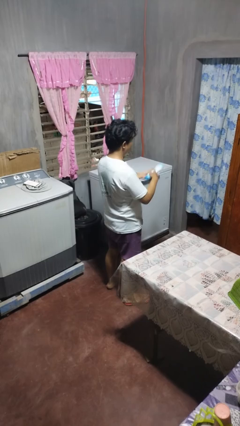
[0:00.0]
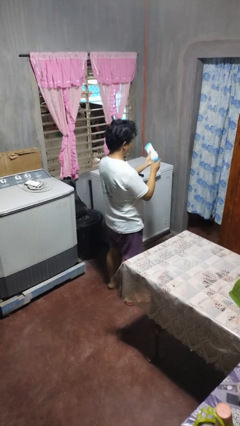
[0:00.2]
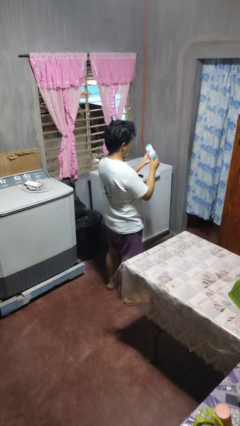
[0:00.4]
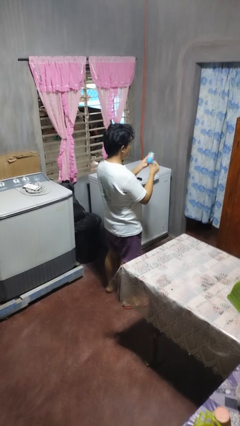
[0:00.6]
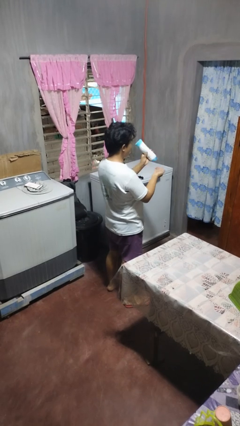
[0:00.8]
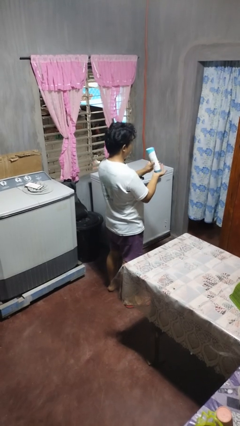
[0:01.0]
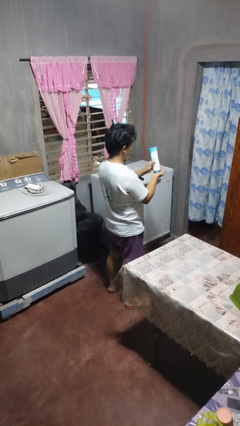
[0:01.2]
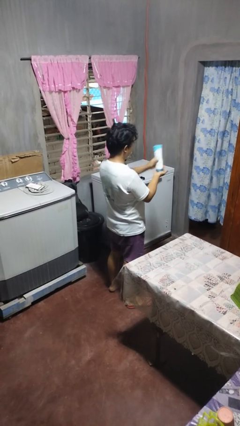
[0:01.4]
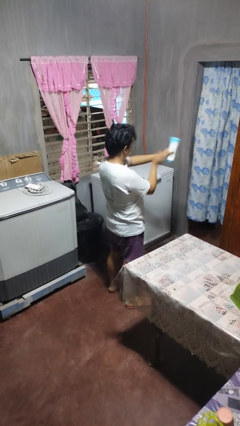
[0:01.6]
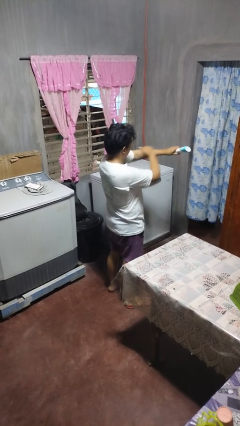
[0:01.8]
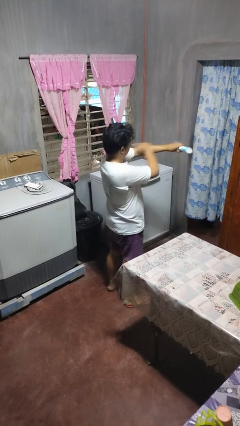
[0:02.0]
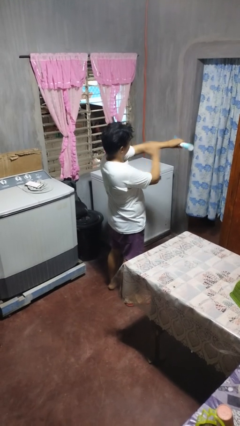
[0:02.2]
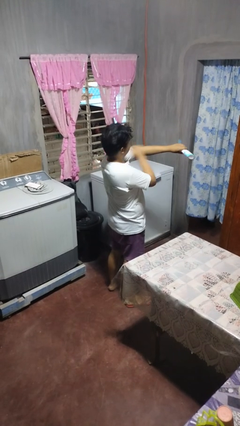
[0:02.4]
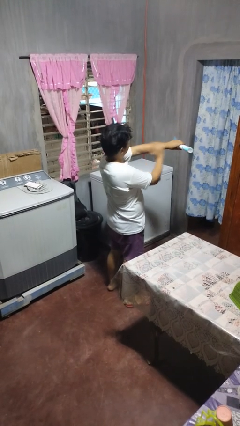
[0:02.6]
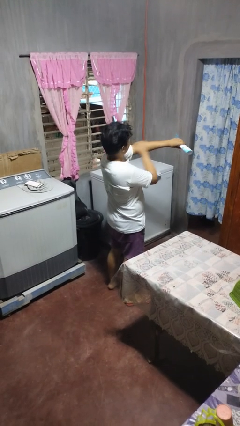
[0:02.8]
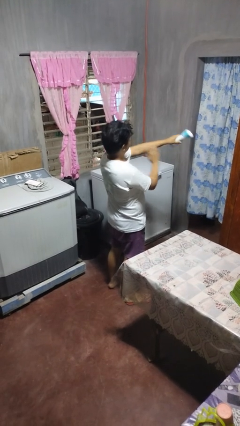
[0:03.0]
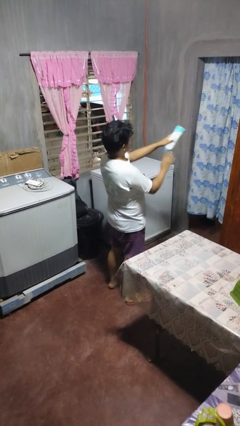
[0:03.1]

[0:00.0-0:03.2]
person applies sunscreen

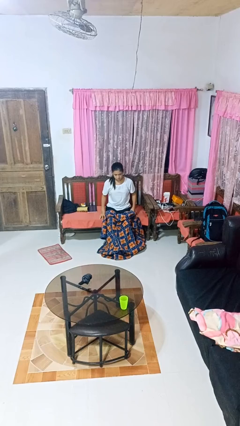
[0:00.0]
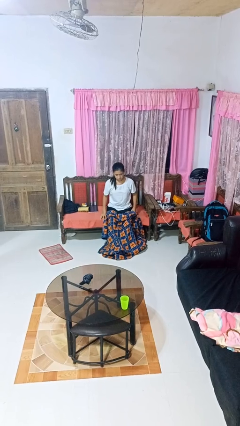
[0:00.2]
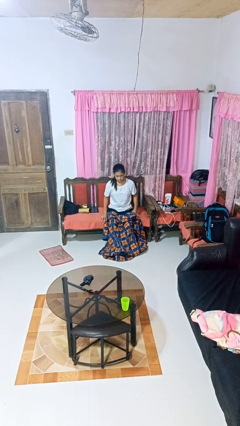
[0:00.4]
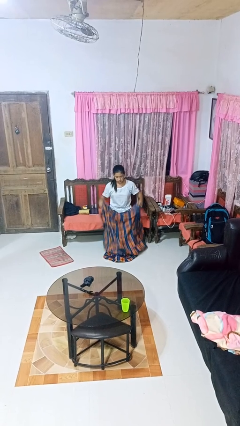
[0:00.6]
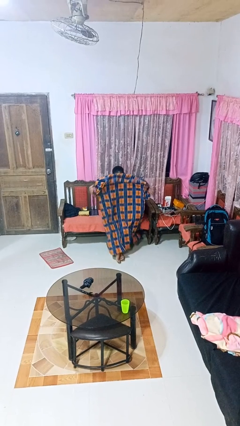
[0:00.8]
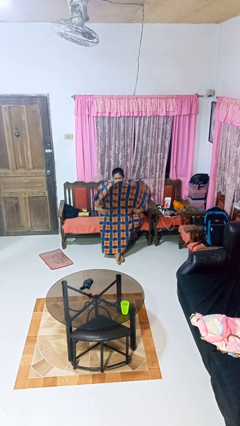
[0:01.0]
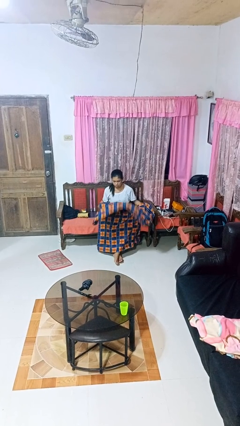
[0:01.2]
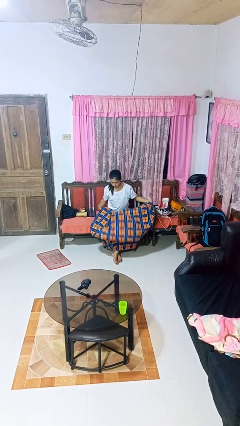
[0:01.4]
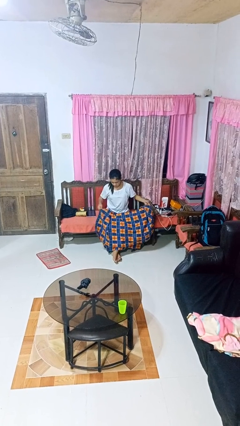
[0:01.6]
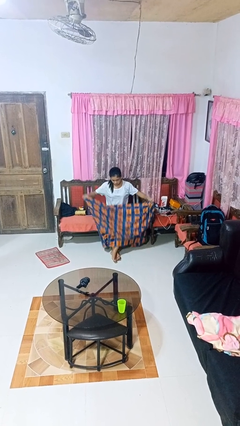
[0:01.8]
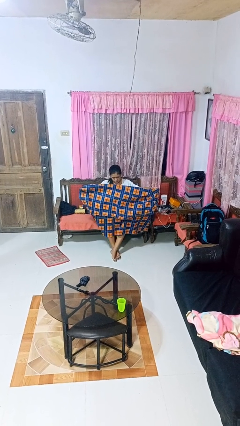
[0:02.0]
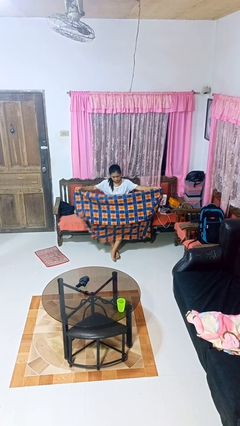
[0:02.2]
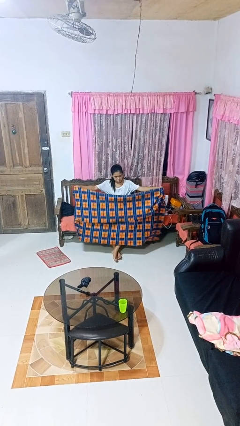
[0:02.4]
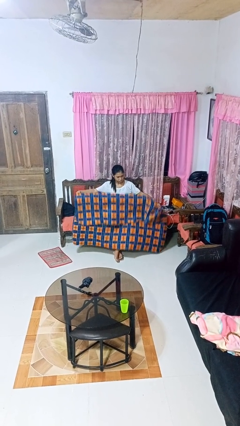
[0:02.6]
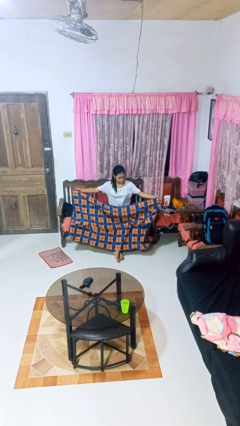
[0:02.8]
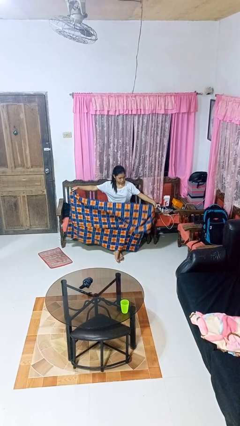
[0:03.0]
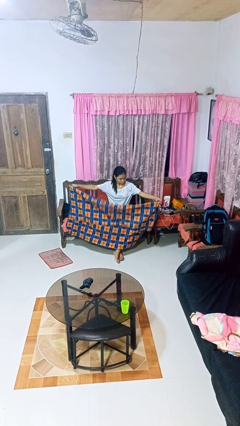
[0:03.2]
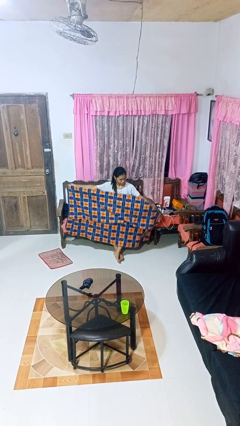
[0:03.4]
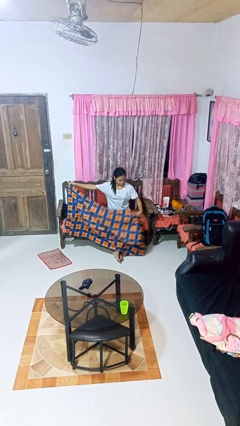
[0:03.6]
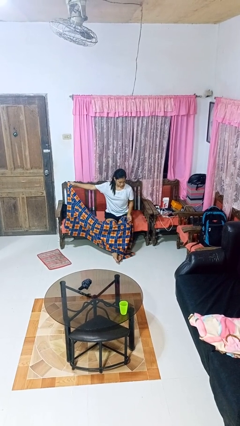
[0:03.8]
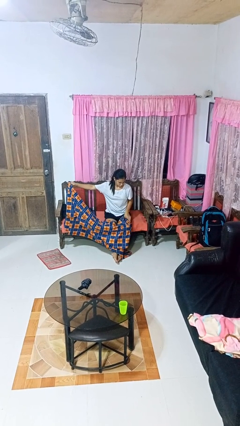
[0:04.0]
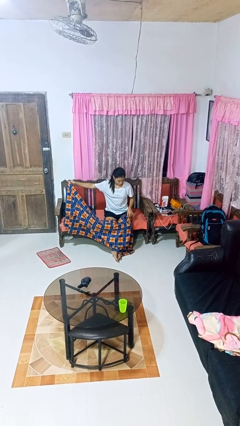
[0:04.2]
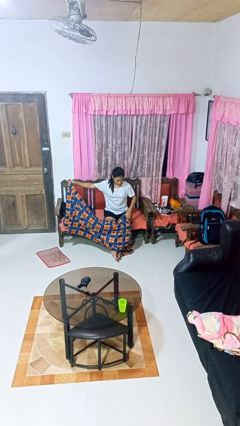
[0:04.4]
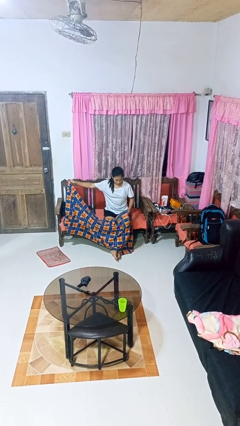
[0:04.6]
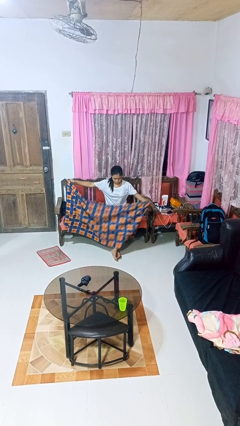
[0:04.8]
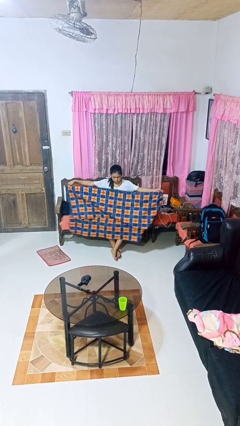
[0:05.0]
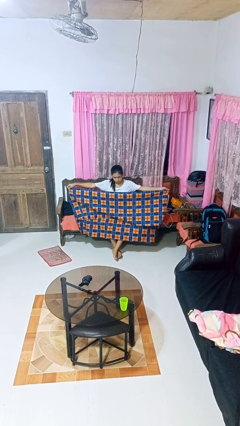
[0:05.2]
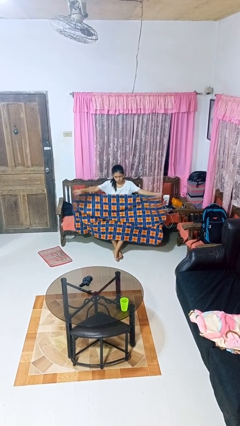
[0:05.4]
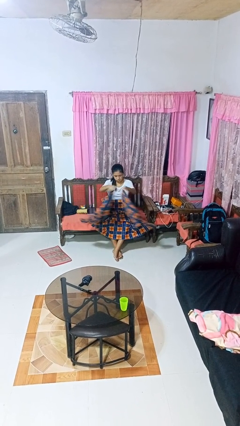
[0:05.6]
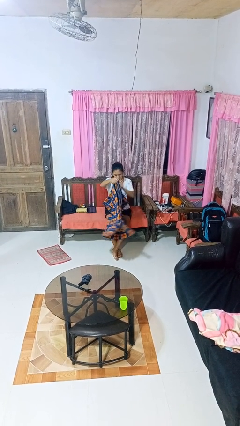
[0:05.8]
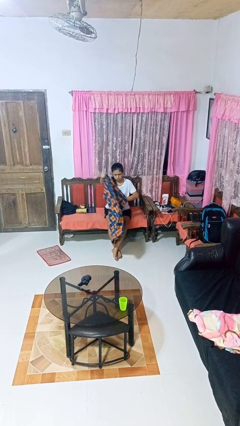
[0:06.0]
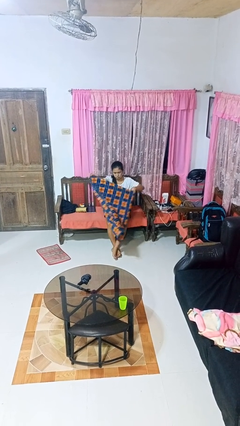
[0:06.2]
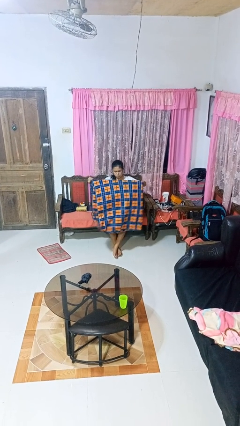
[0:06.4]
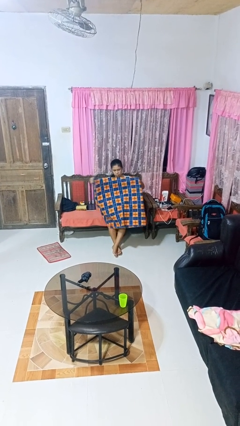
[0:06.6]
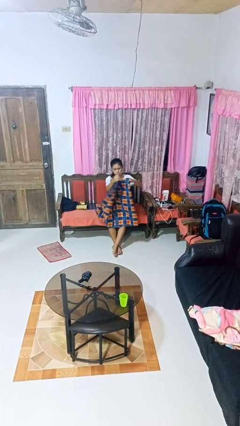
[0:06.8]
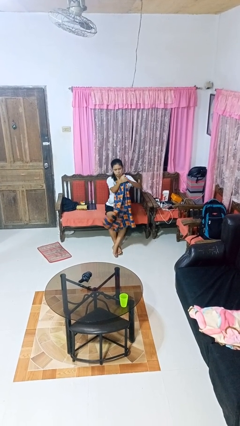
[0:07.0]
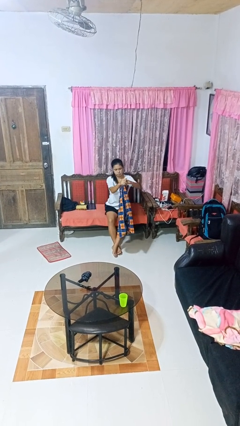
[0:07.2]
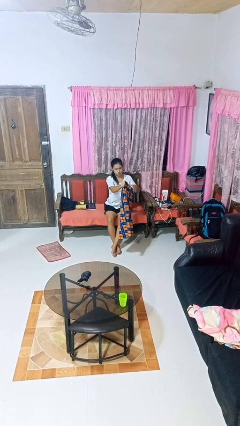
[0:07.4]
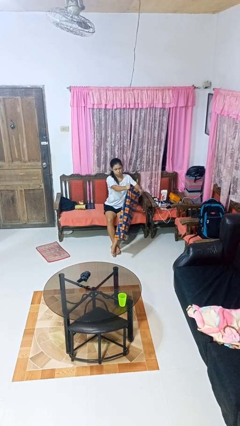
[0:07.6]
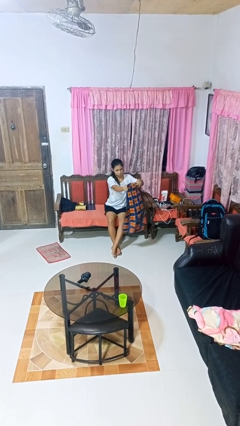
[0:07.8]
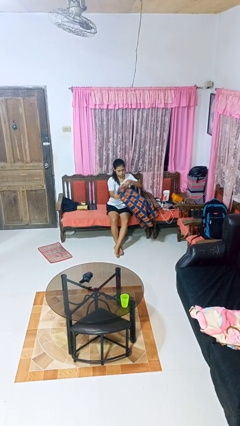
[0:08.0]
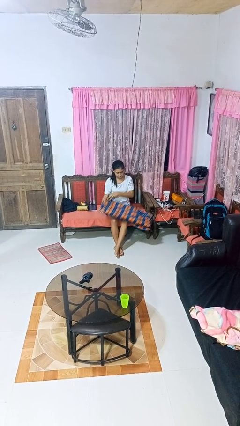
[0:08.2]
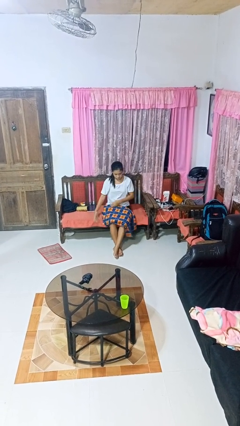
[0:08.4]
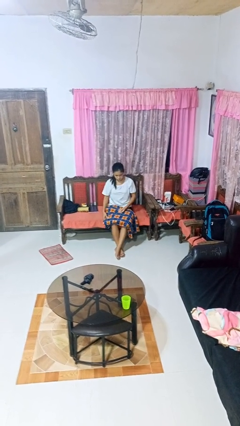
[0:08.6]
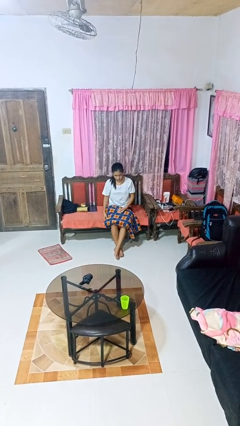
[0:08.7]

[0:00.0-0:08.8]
person folds blanket

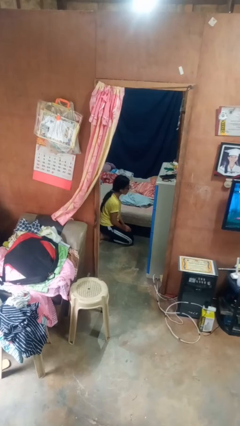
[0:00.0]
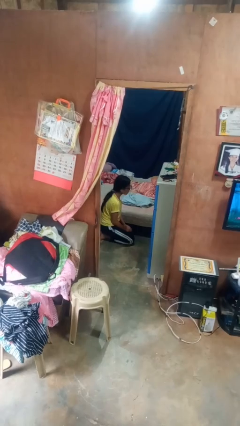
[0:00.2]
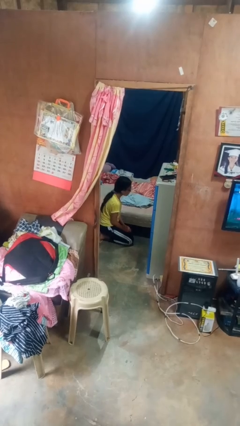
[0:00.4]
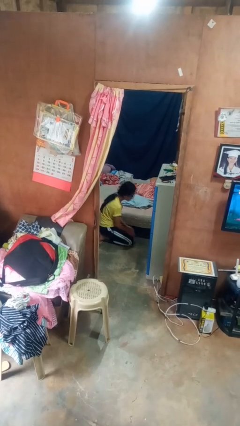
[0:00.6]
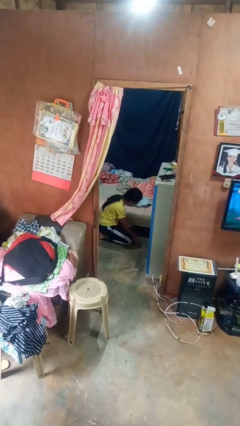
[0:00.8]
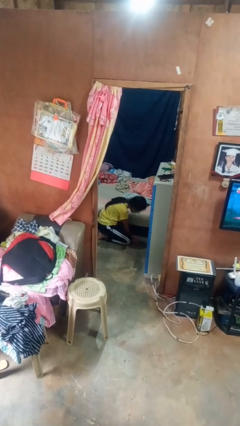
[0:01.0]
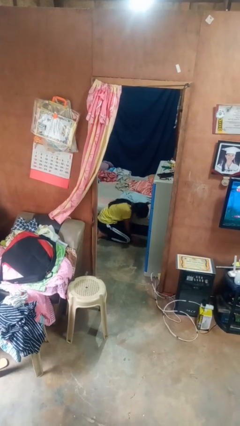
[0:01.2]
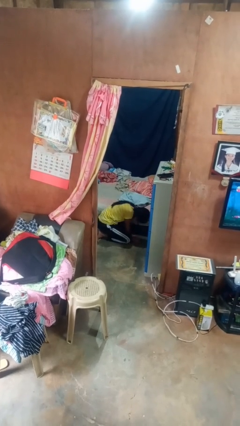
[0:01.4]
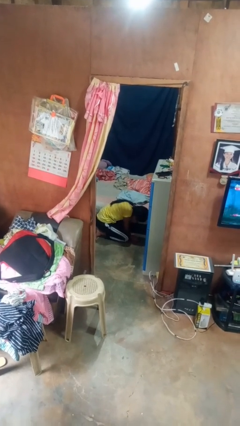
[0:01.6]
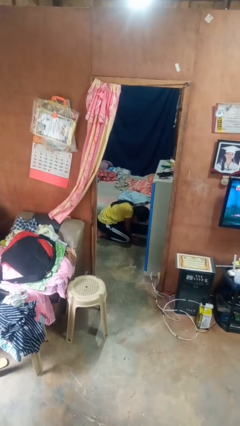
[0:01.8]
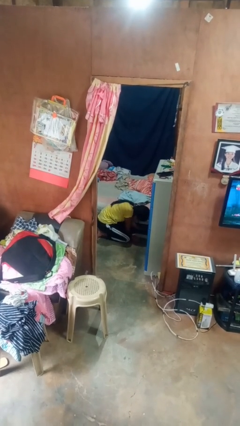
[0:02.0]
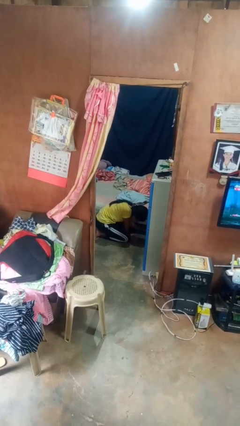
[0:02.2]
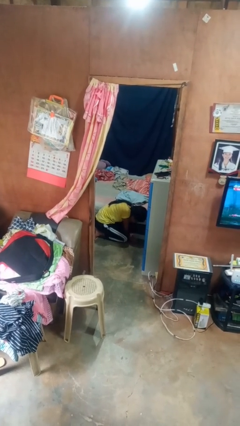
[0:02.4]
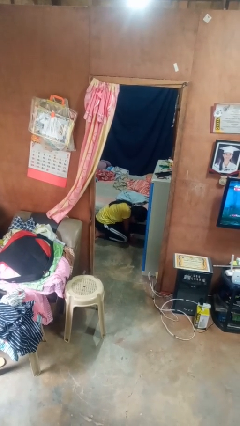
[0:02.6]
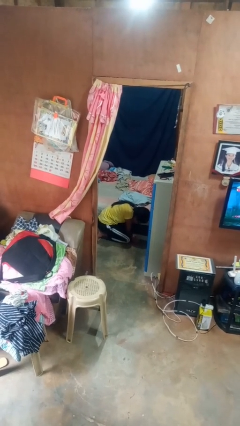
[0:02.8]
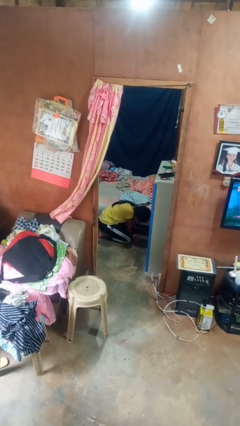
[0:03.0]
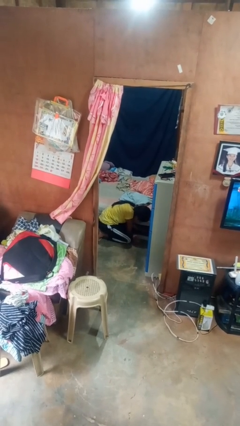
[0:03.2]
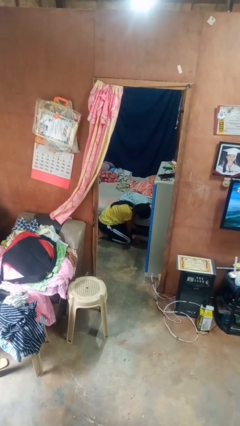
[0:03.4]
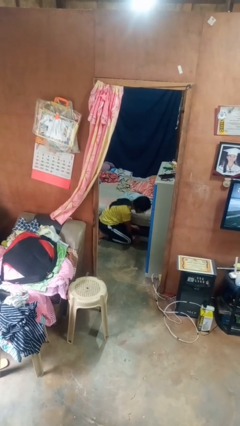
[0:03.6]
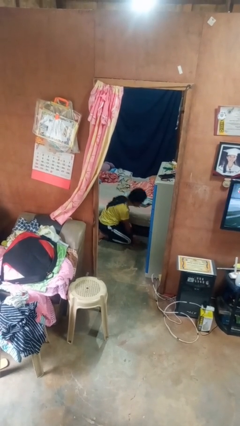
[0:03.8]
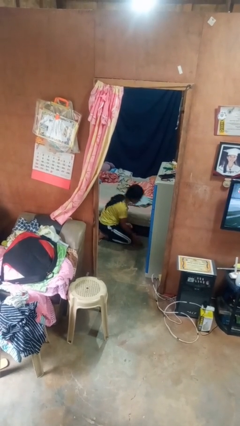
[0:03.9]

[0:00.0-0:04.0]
person searches under bed

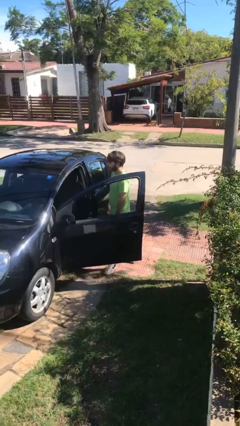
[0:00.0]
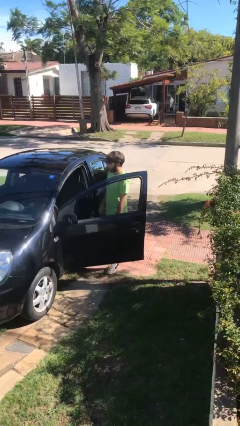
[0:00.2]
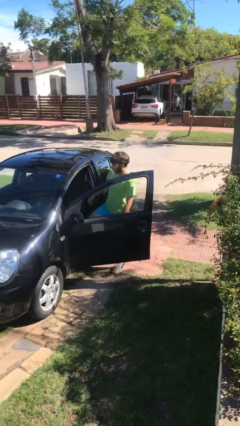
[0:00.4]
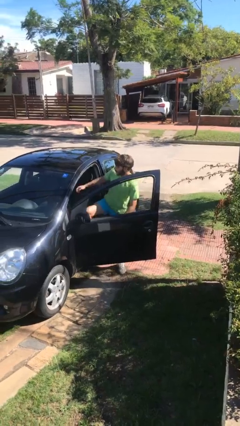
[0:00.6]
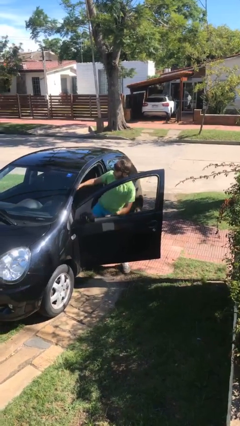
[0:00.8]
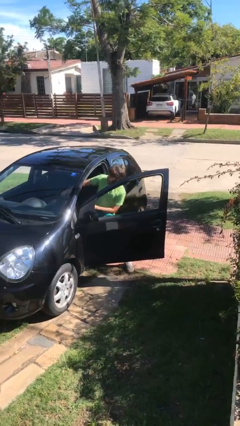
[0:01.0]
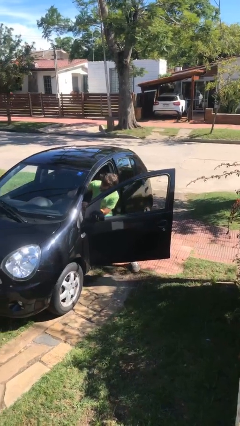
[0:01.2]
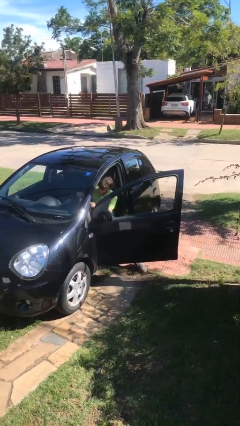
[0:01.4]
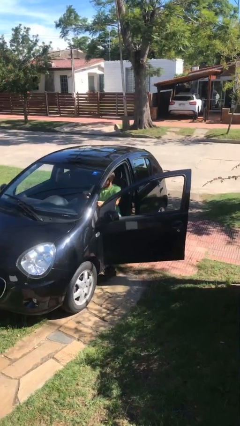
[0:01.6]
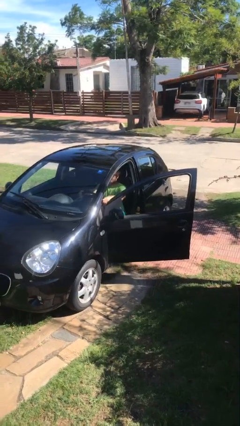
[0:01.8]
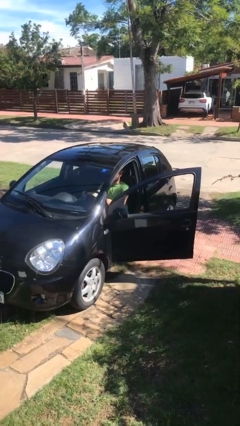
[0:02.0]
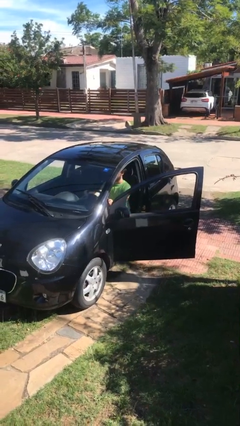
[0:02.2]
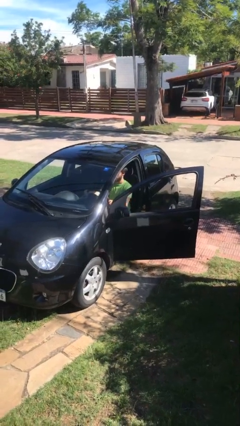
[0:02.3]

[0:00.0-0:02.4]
person enters car
